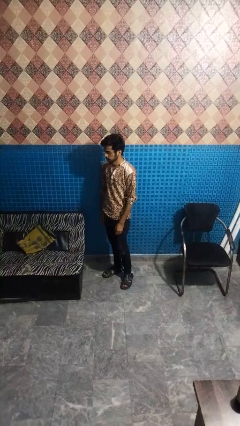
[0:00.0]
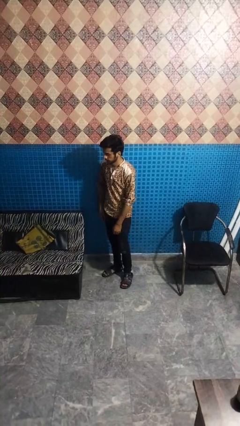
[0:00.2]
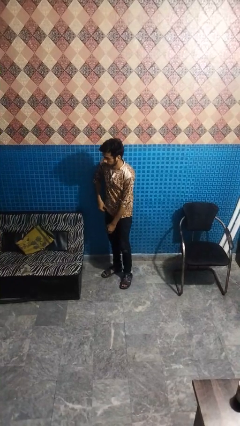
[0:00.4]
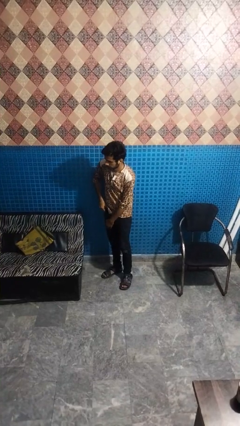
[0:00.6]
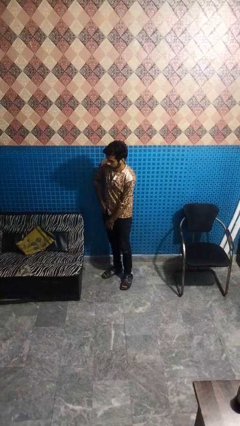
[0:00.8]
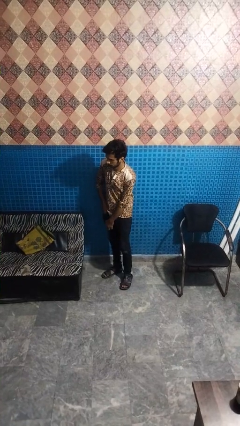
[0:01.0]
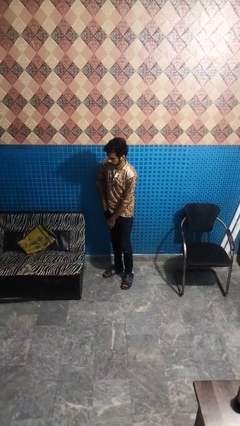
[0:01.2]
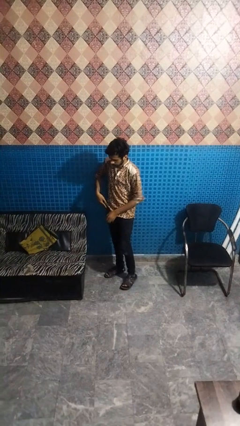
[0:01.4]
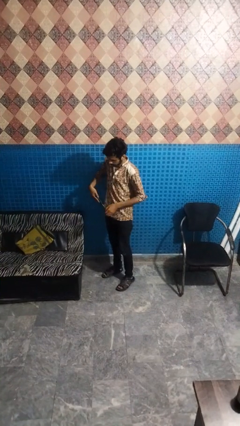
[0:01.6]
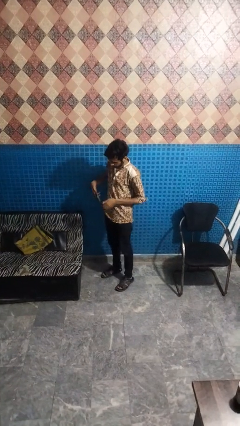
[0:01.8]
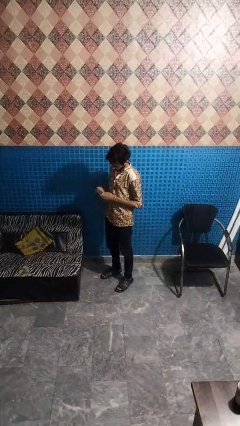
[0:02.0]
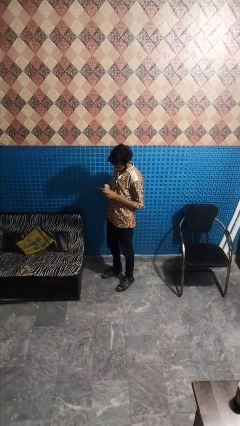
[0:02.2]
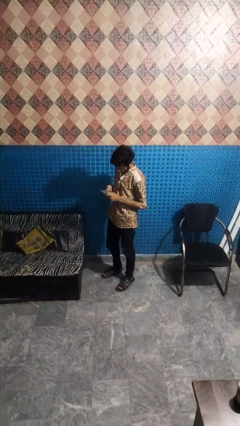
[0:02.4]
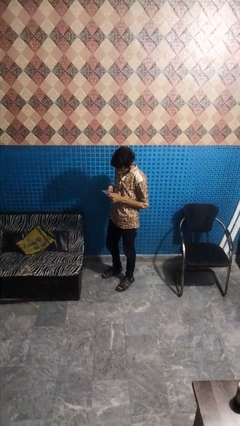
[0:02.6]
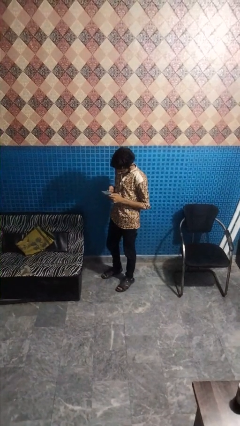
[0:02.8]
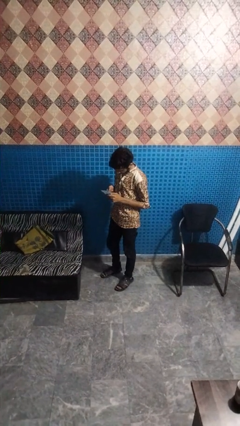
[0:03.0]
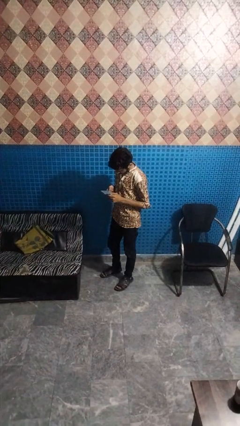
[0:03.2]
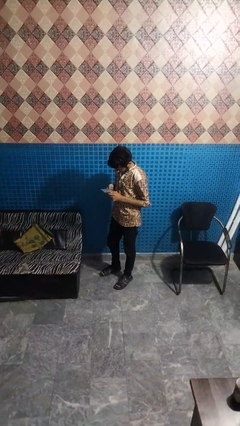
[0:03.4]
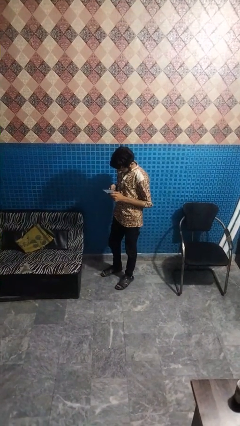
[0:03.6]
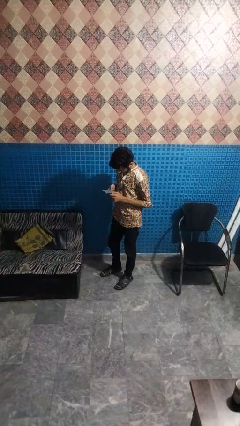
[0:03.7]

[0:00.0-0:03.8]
person takes phone from pocket

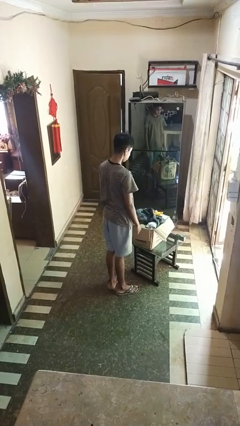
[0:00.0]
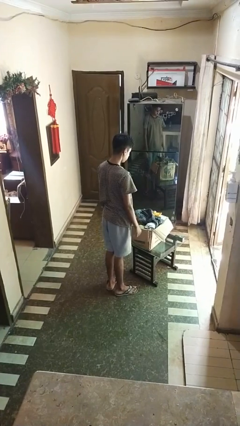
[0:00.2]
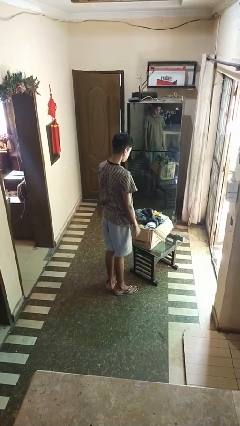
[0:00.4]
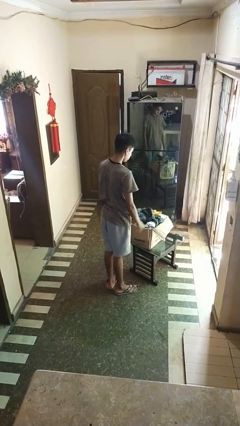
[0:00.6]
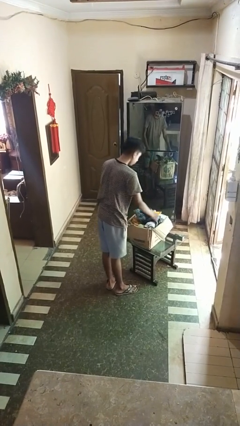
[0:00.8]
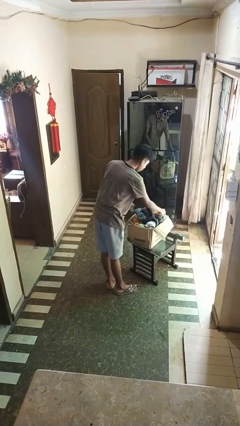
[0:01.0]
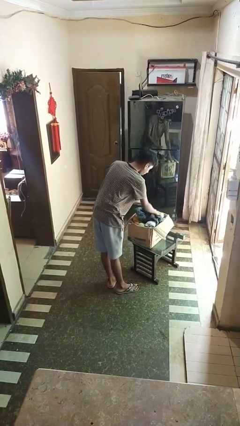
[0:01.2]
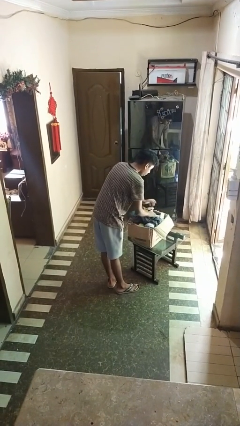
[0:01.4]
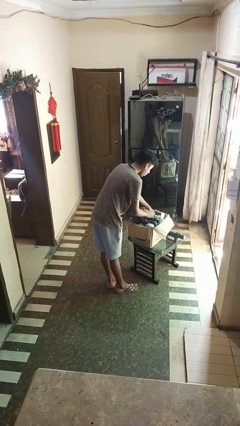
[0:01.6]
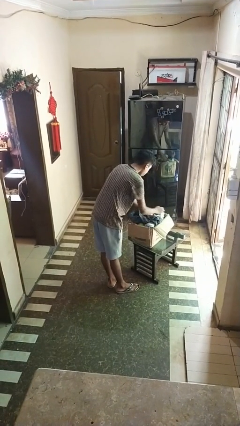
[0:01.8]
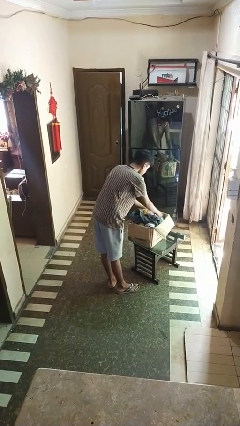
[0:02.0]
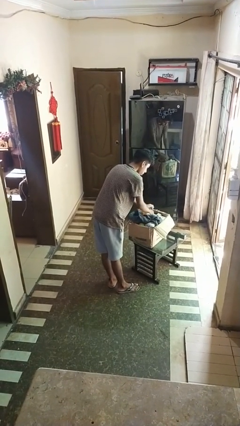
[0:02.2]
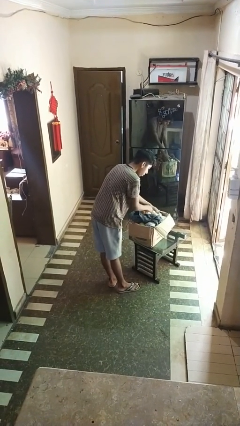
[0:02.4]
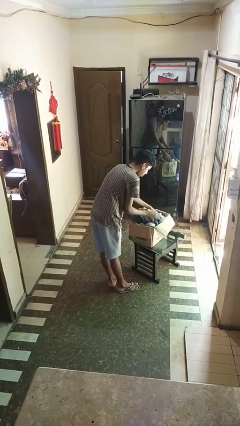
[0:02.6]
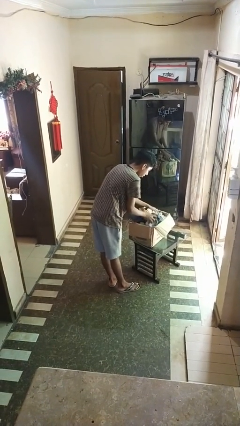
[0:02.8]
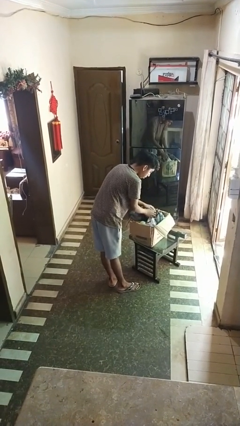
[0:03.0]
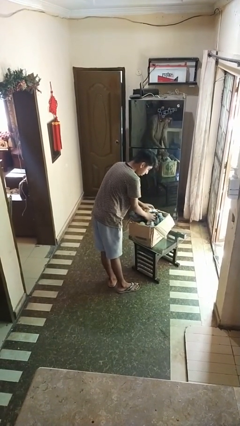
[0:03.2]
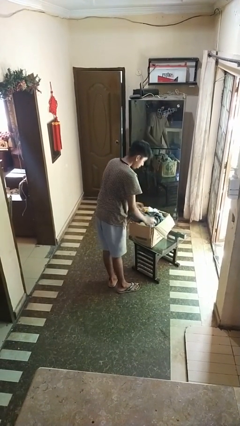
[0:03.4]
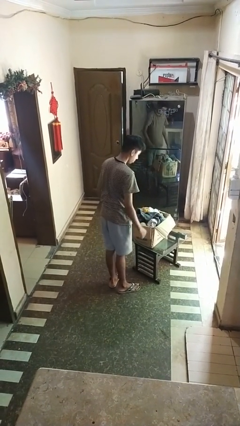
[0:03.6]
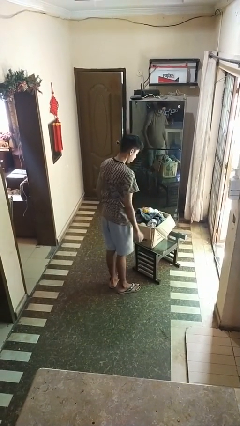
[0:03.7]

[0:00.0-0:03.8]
person searches in box

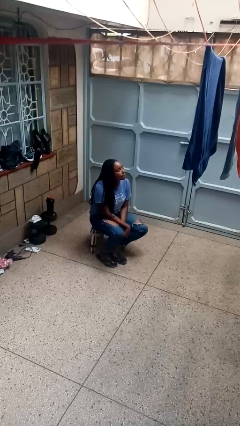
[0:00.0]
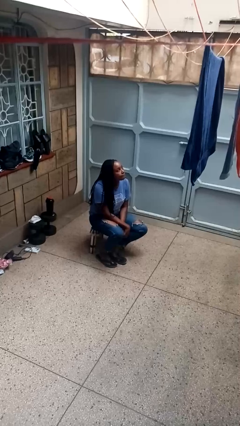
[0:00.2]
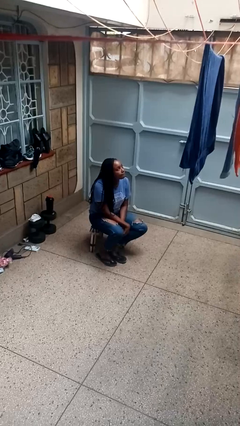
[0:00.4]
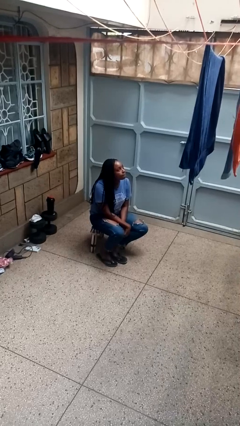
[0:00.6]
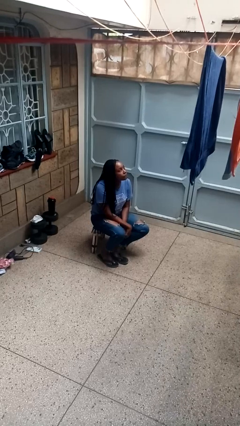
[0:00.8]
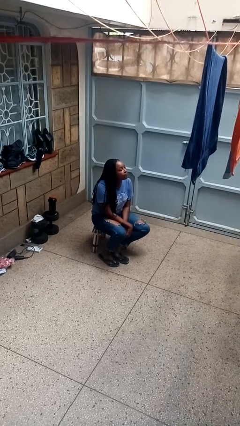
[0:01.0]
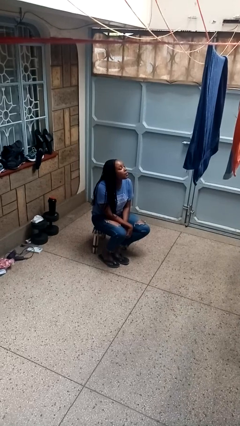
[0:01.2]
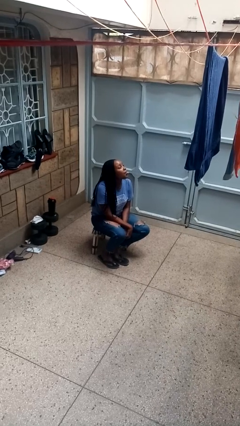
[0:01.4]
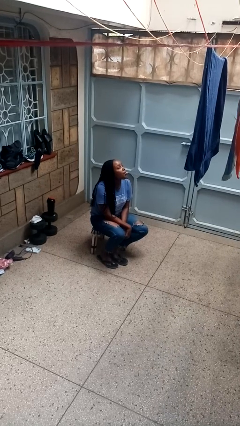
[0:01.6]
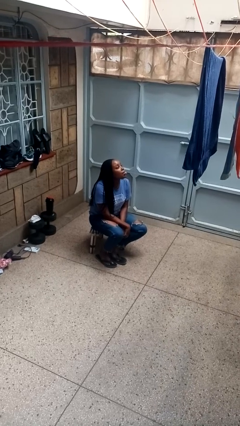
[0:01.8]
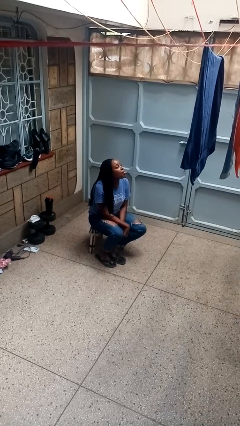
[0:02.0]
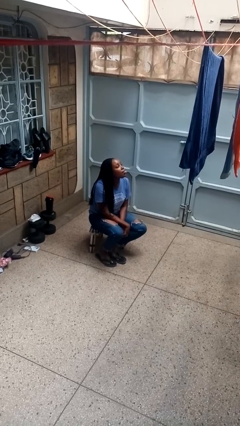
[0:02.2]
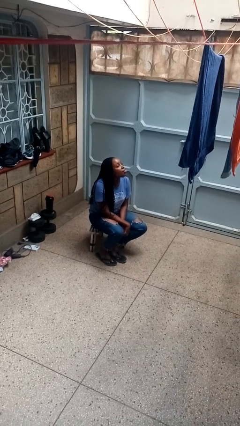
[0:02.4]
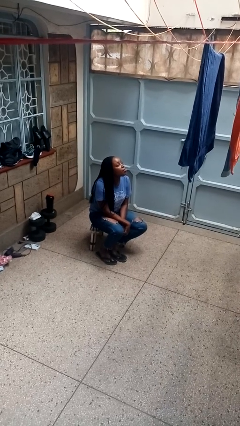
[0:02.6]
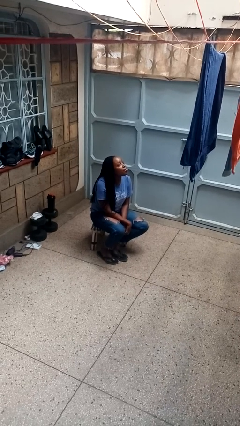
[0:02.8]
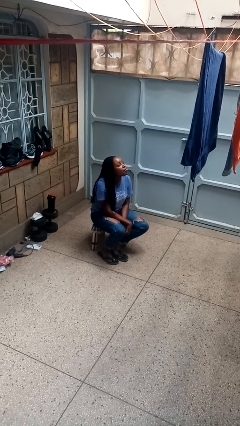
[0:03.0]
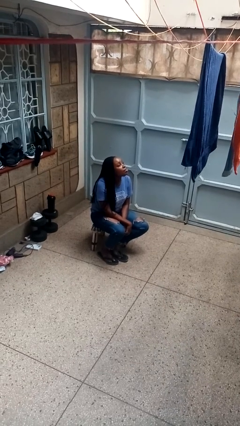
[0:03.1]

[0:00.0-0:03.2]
person sticks out tongue

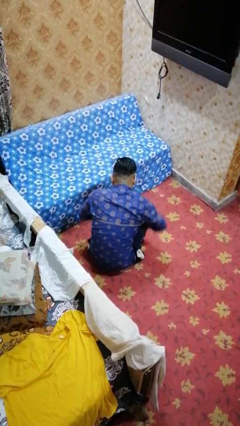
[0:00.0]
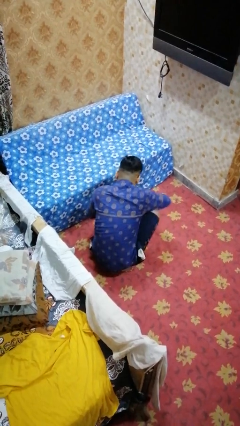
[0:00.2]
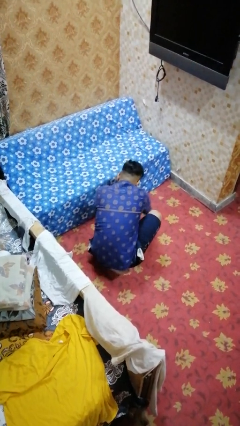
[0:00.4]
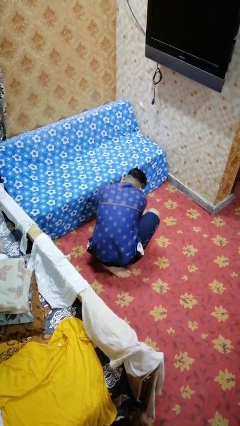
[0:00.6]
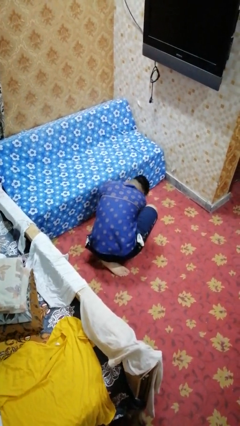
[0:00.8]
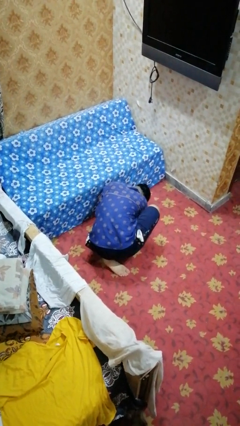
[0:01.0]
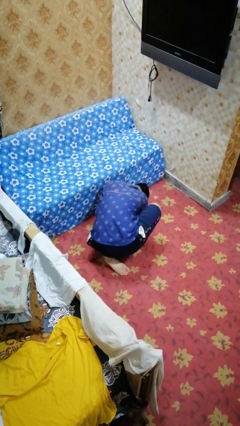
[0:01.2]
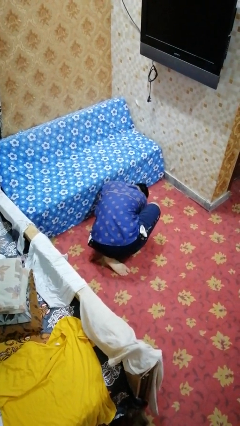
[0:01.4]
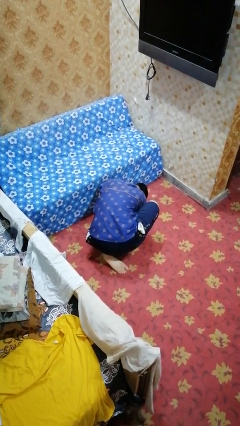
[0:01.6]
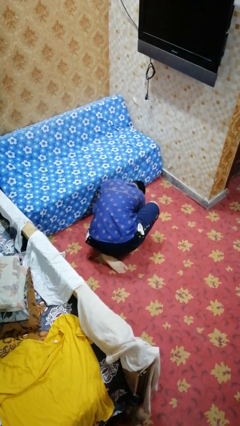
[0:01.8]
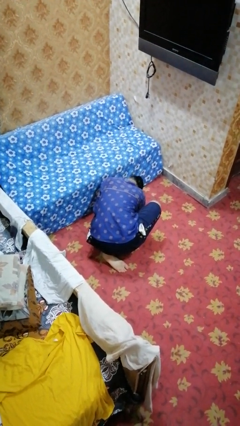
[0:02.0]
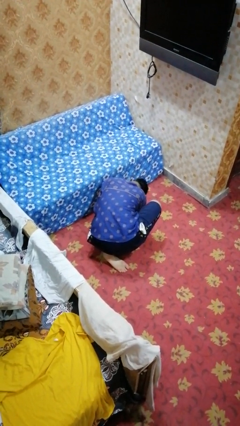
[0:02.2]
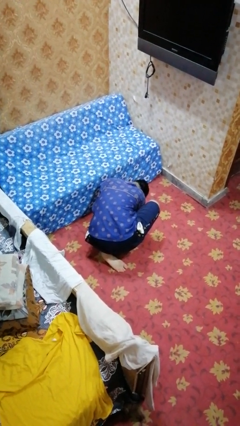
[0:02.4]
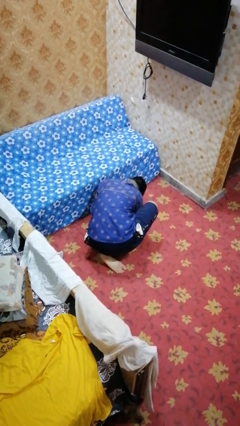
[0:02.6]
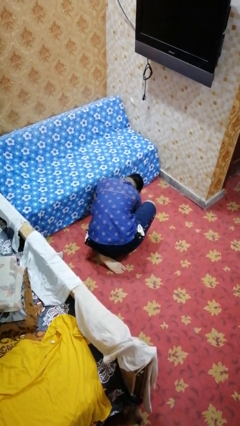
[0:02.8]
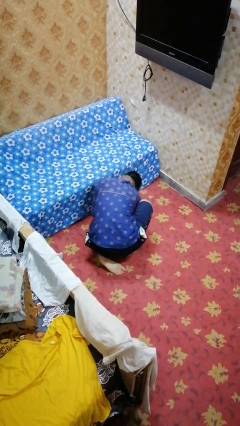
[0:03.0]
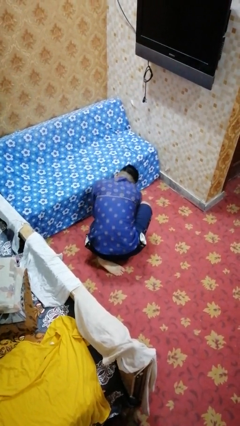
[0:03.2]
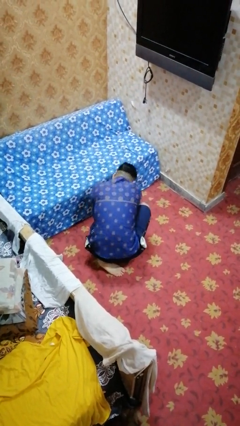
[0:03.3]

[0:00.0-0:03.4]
person searches under couch

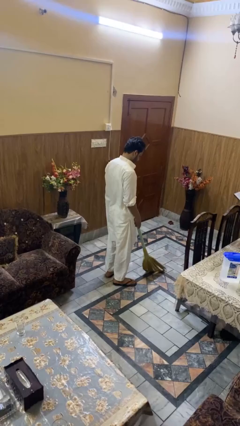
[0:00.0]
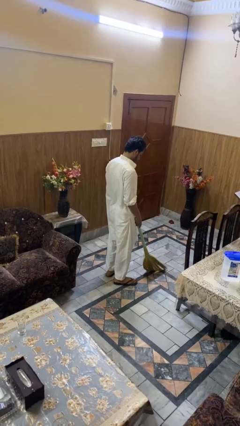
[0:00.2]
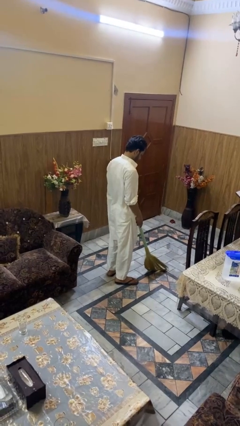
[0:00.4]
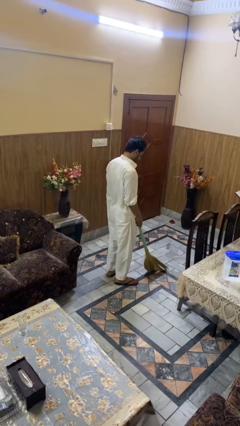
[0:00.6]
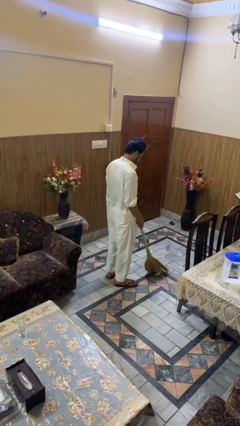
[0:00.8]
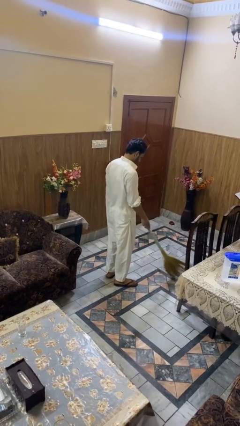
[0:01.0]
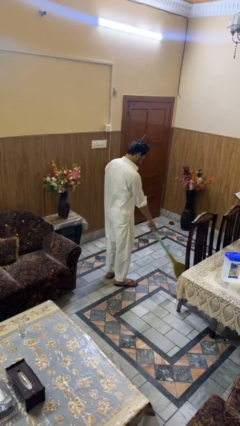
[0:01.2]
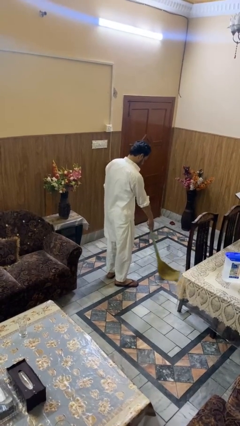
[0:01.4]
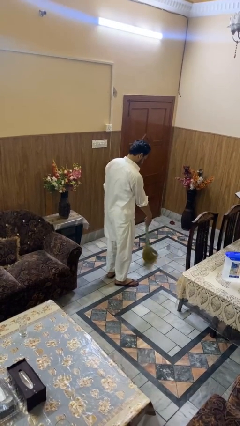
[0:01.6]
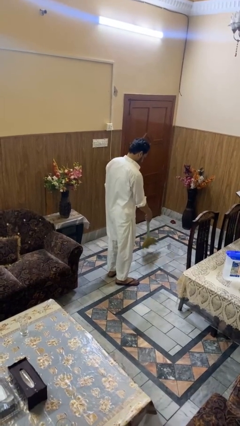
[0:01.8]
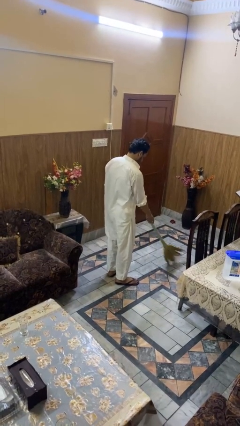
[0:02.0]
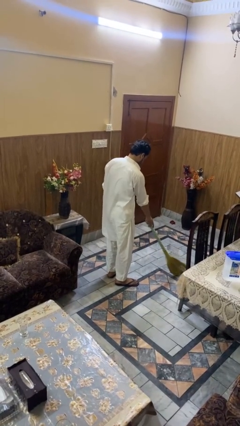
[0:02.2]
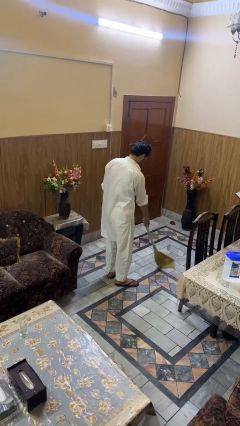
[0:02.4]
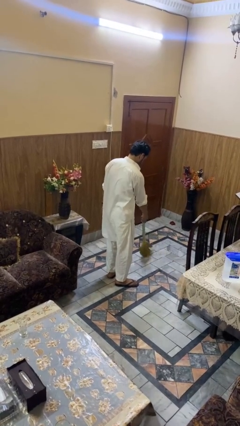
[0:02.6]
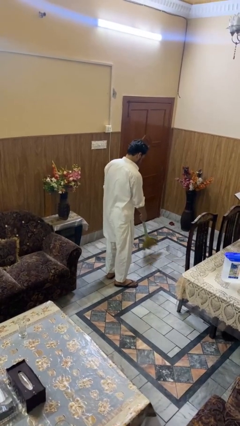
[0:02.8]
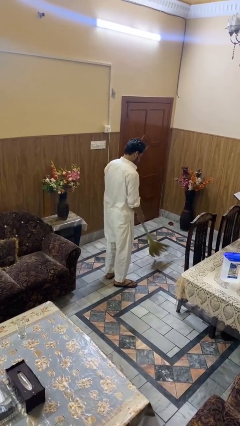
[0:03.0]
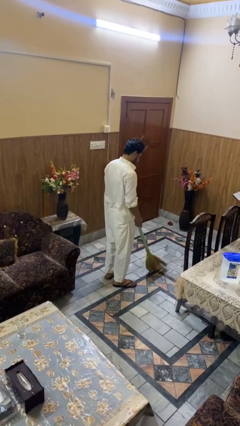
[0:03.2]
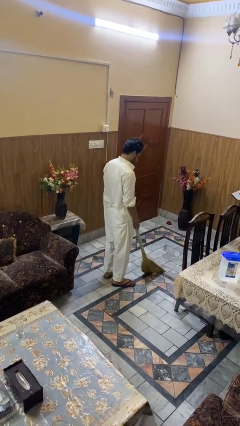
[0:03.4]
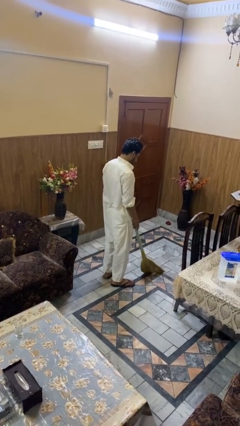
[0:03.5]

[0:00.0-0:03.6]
person sweeps floor
